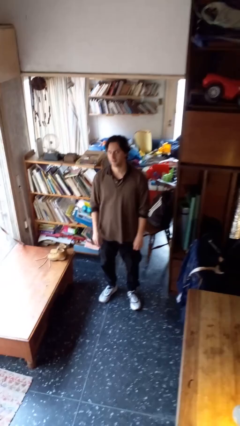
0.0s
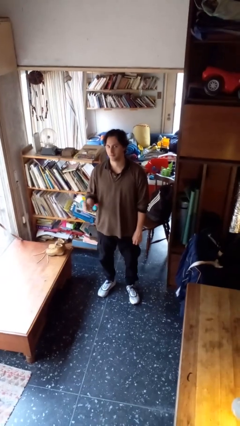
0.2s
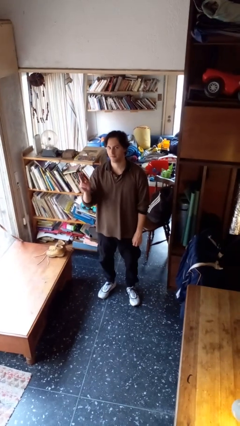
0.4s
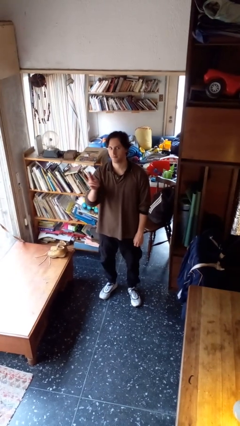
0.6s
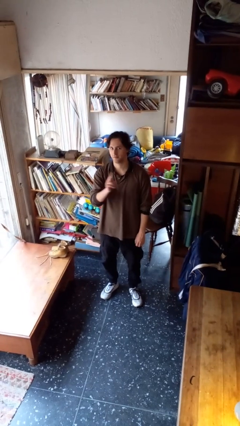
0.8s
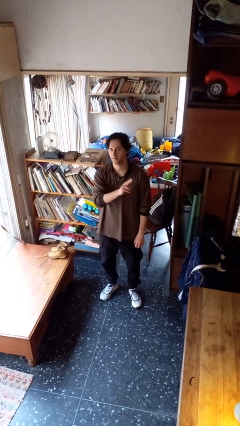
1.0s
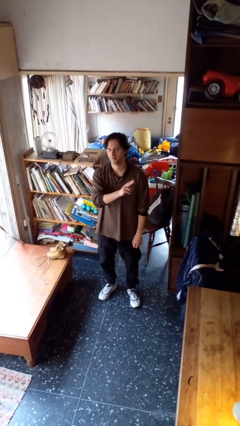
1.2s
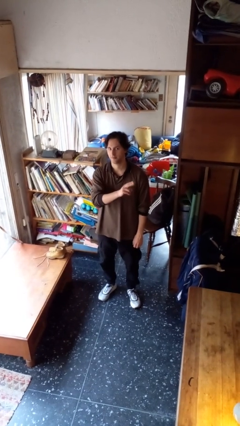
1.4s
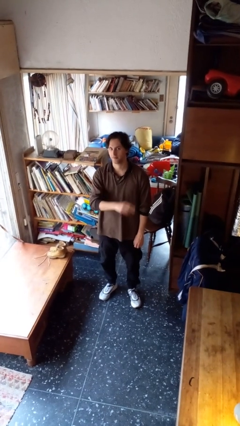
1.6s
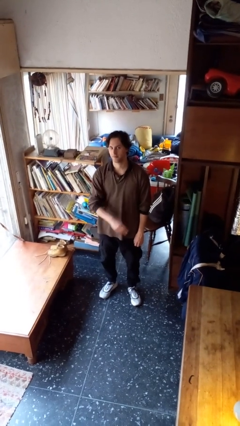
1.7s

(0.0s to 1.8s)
person gestures swipe left

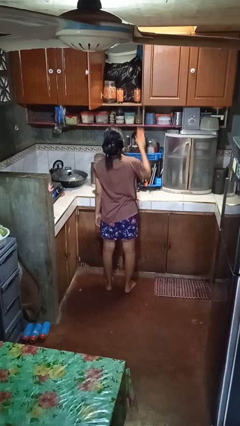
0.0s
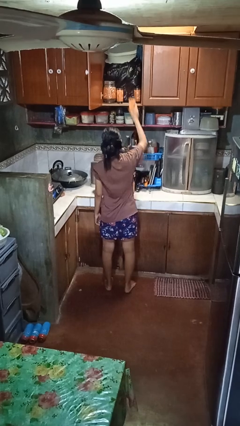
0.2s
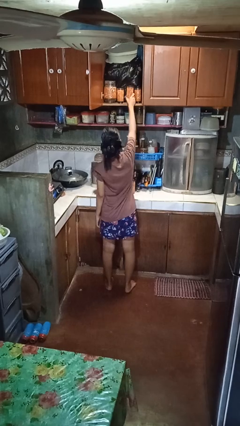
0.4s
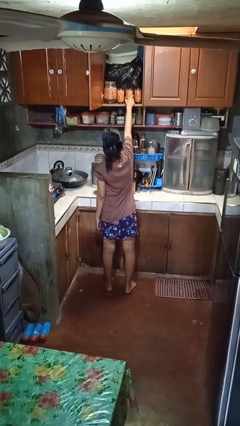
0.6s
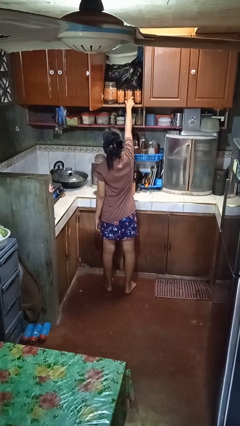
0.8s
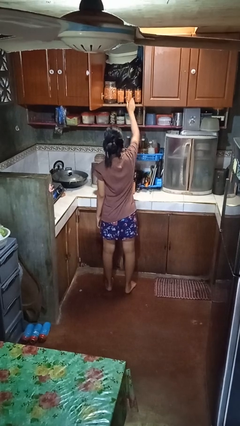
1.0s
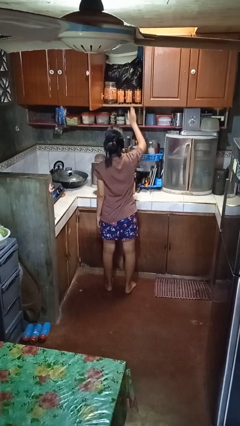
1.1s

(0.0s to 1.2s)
person puts object in cabinet

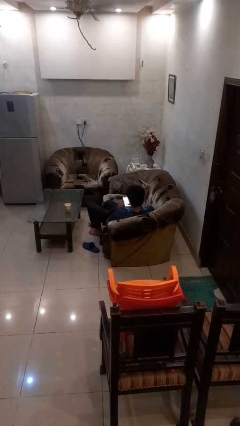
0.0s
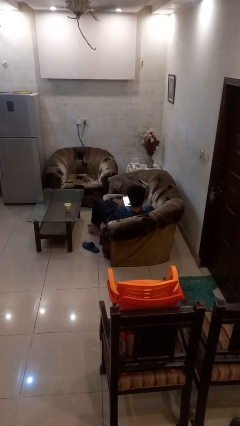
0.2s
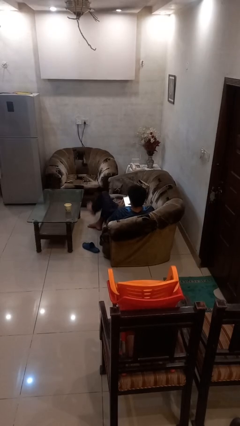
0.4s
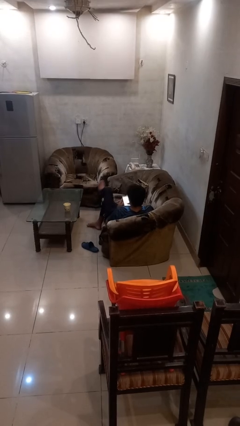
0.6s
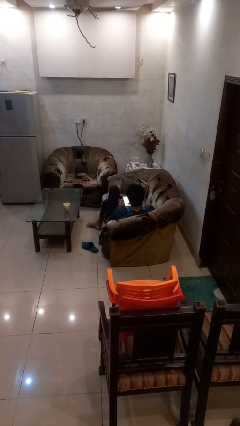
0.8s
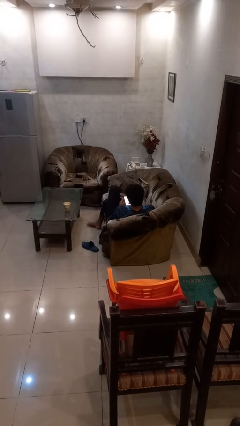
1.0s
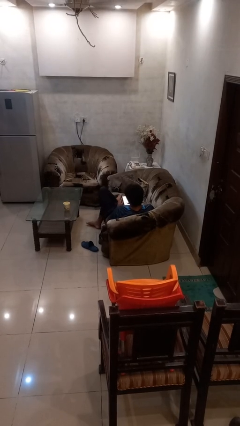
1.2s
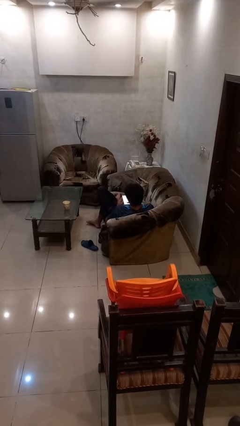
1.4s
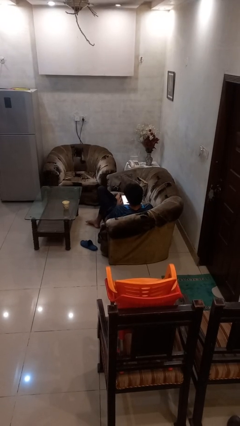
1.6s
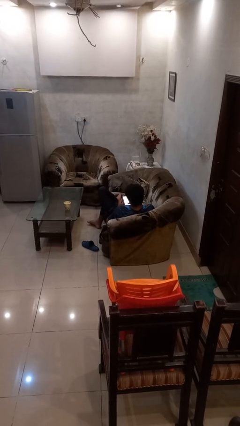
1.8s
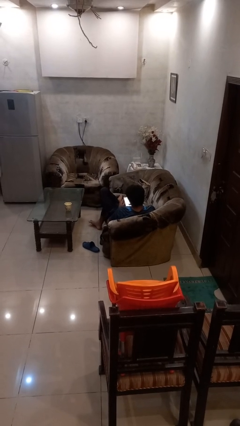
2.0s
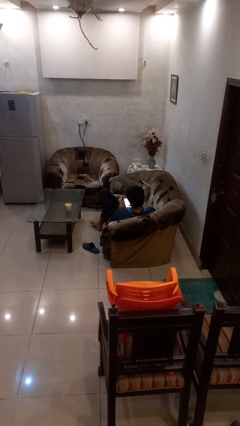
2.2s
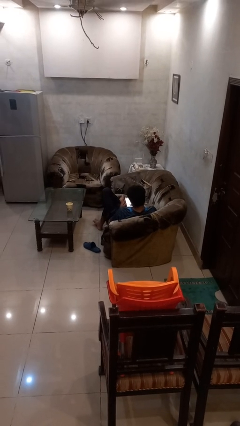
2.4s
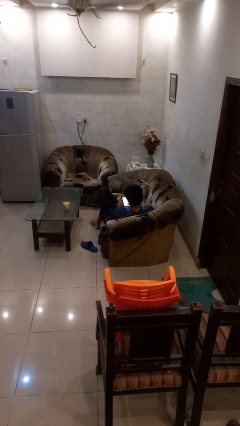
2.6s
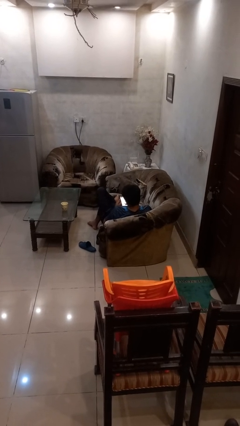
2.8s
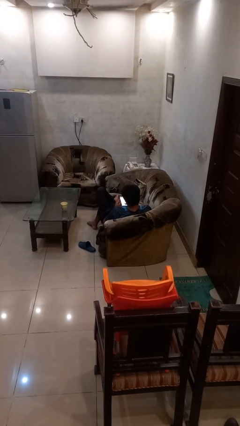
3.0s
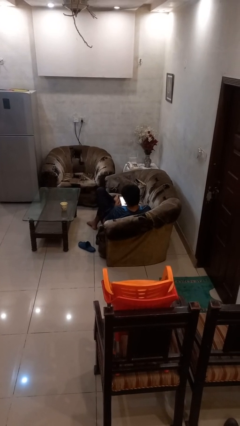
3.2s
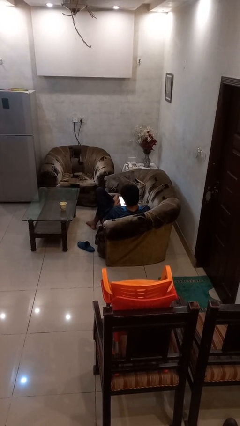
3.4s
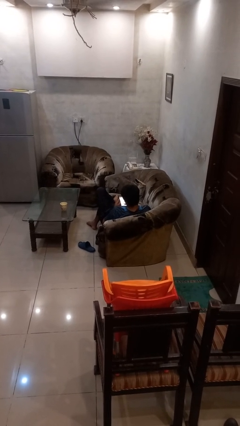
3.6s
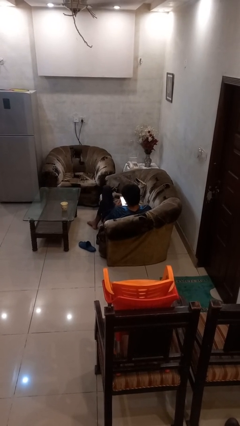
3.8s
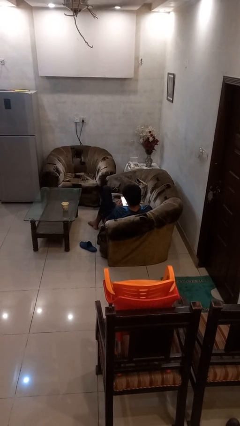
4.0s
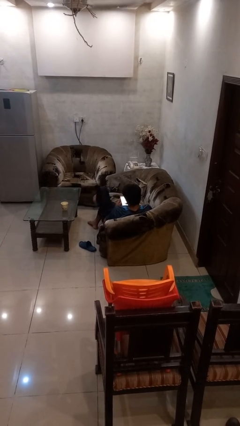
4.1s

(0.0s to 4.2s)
person crosses legs

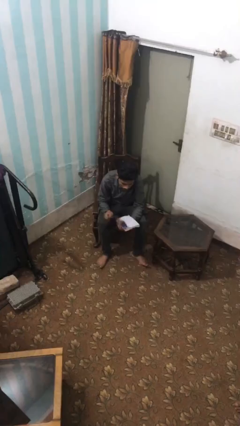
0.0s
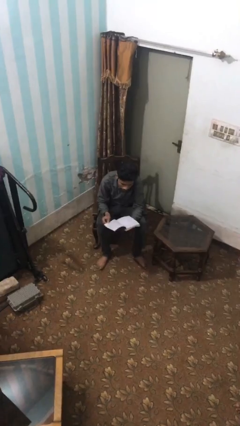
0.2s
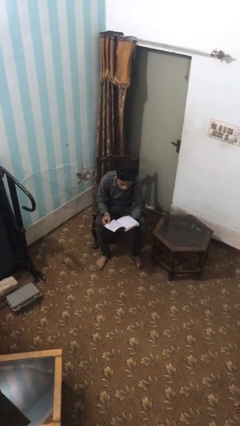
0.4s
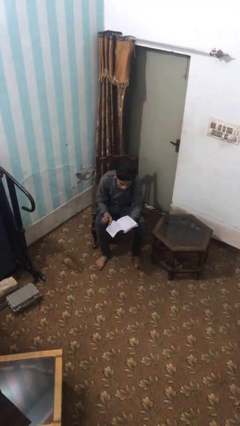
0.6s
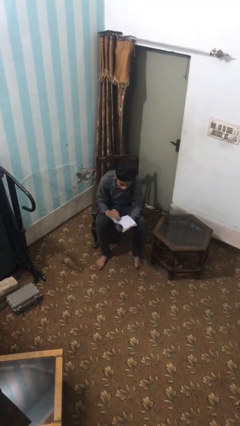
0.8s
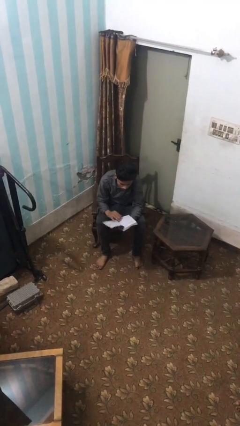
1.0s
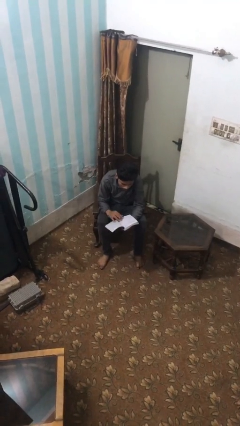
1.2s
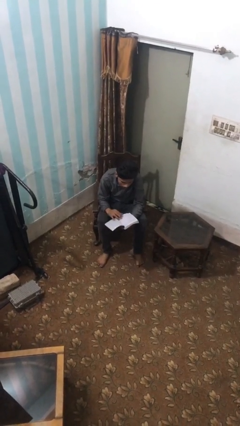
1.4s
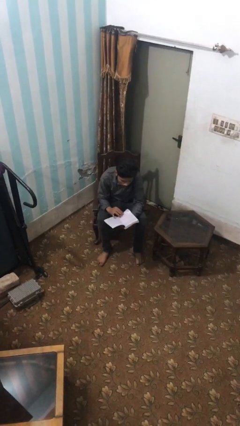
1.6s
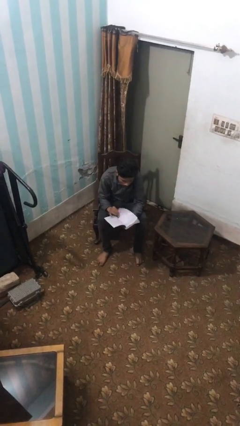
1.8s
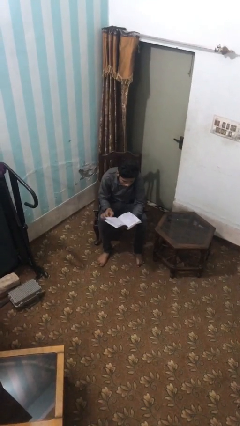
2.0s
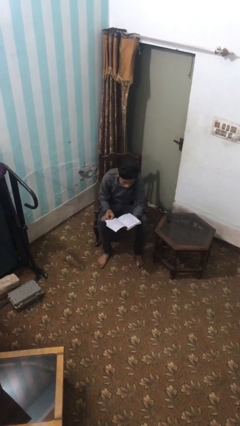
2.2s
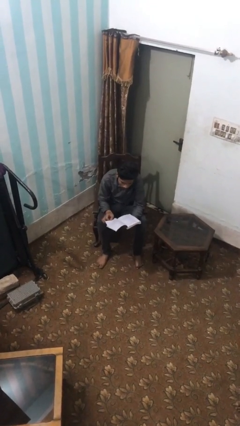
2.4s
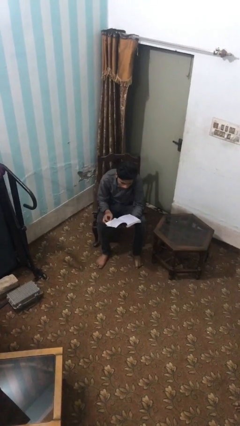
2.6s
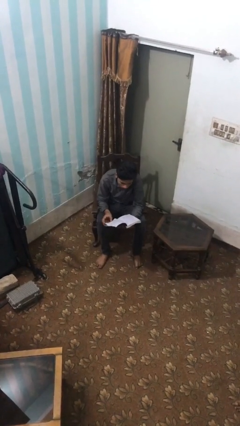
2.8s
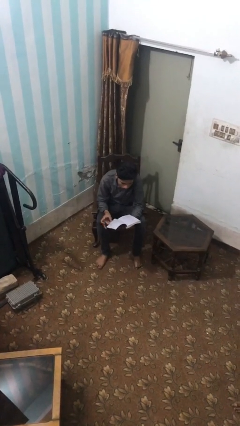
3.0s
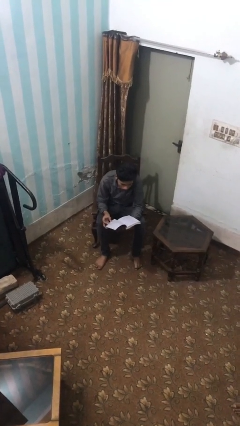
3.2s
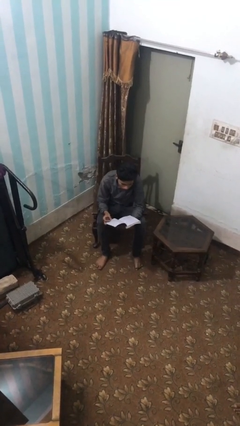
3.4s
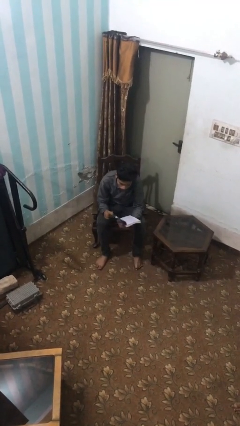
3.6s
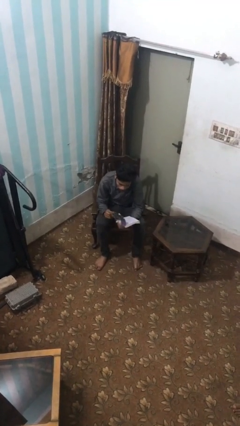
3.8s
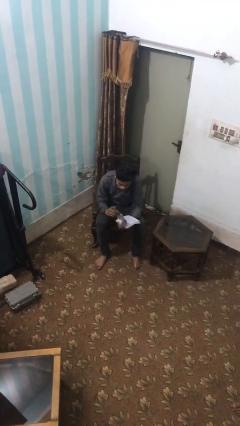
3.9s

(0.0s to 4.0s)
person reads document

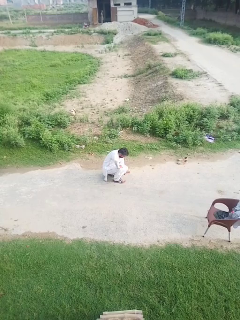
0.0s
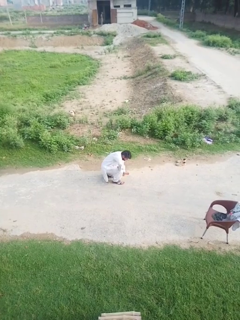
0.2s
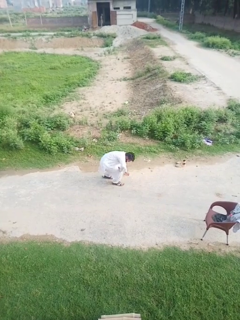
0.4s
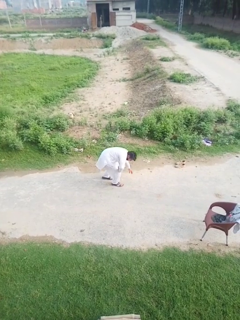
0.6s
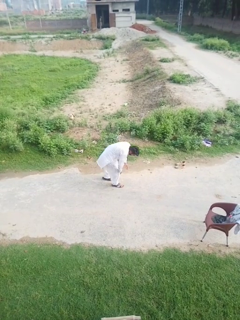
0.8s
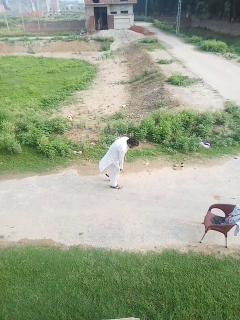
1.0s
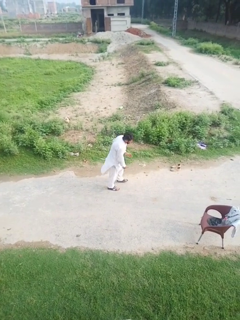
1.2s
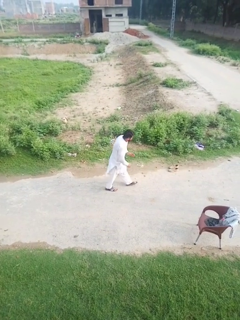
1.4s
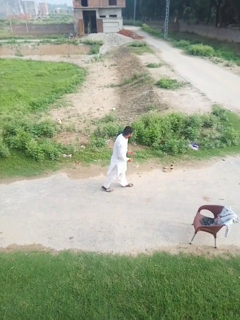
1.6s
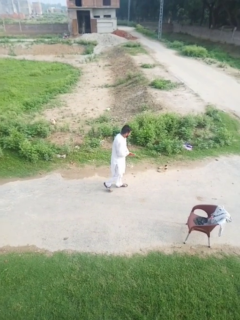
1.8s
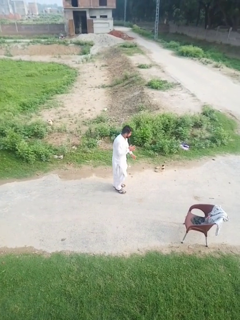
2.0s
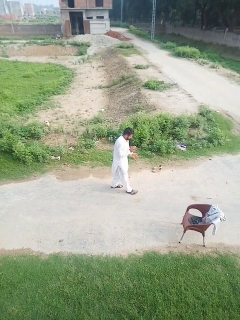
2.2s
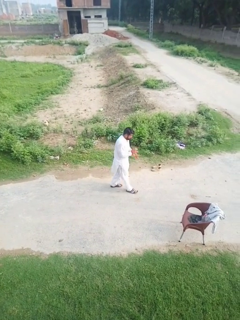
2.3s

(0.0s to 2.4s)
person stands up from floor

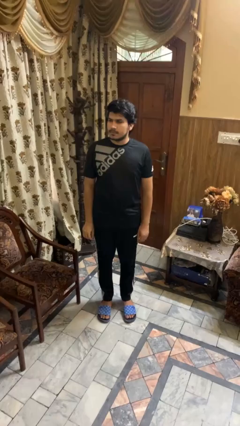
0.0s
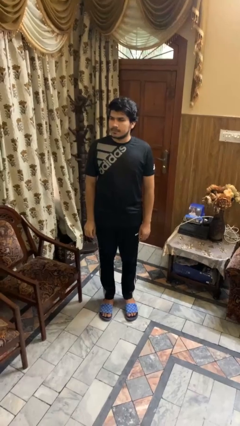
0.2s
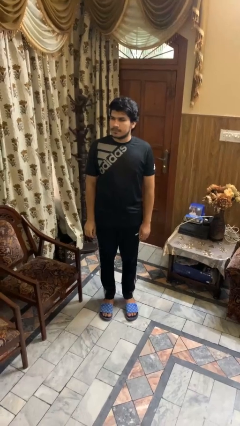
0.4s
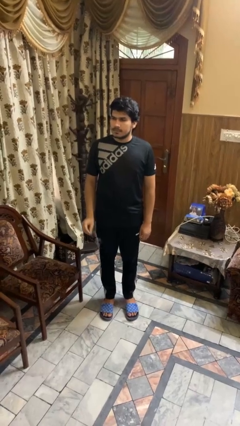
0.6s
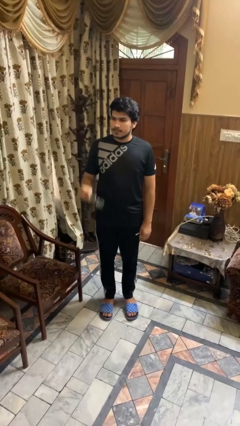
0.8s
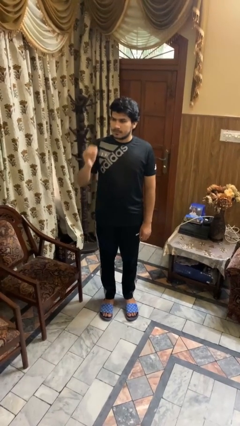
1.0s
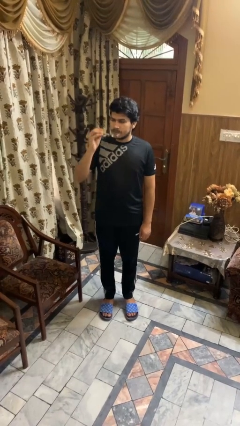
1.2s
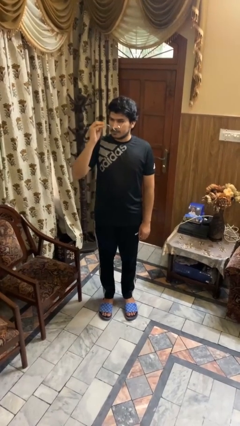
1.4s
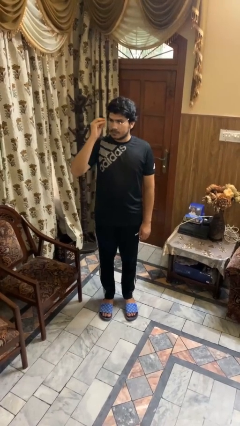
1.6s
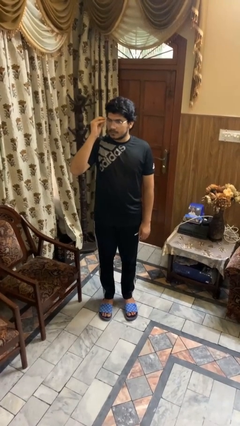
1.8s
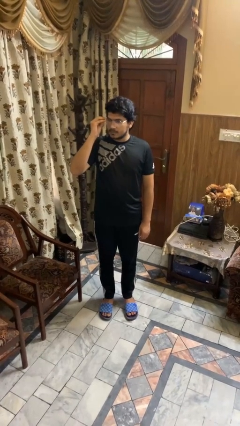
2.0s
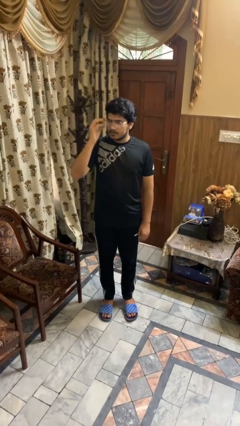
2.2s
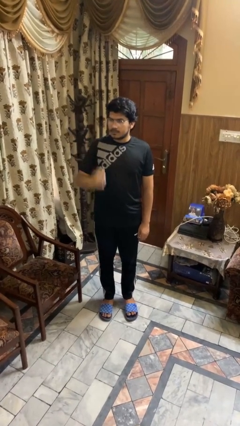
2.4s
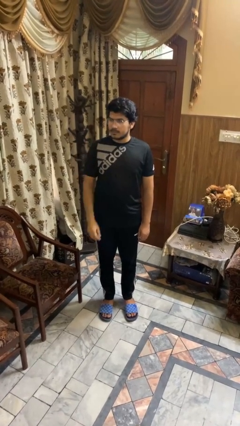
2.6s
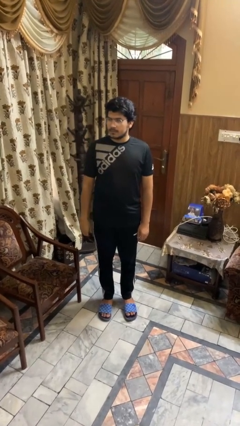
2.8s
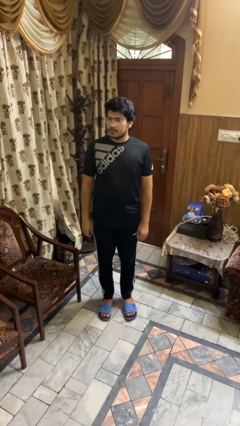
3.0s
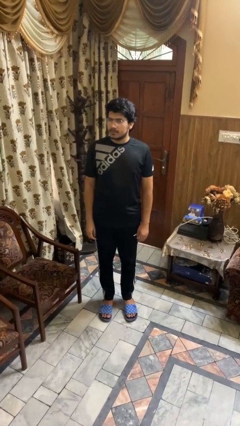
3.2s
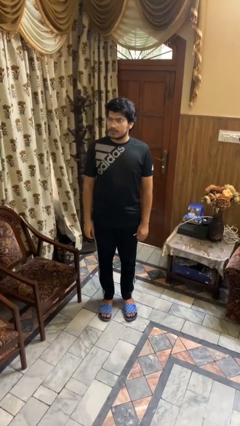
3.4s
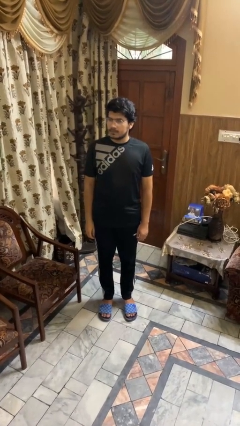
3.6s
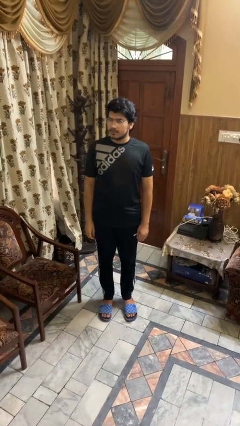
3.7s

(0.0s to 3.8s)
person puts on glasses
